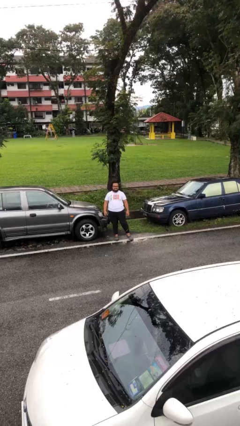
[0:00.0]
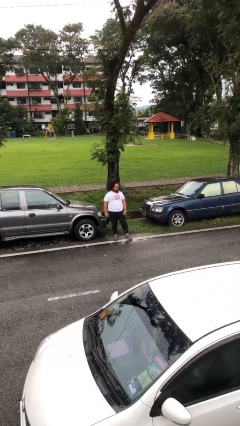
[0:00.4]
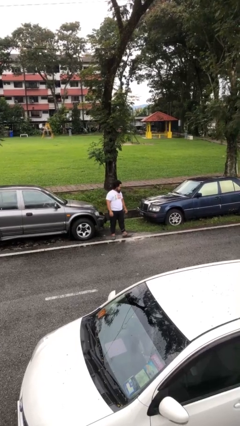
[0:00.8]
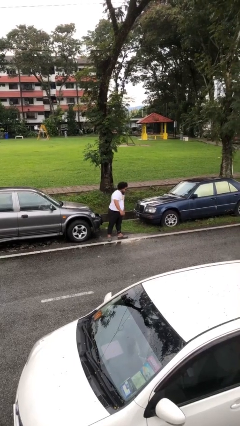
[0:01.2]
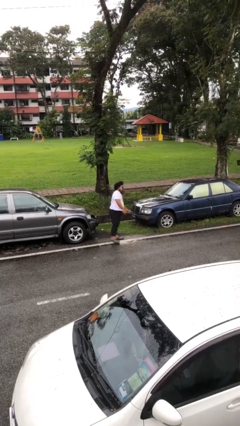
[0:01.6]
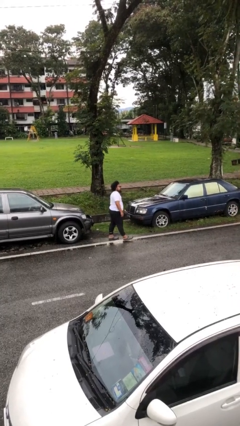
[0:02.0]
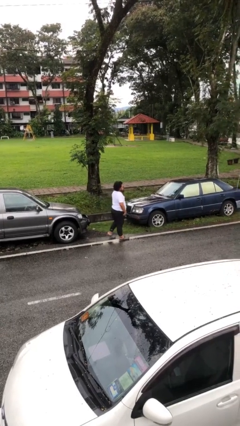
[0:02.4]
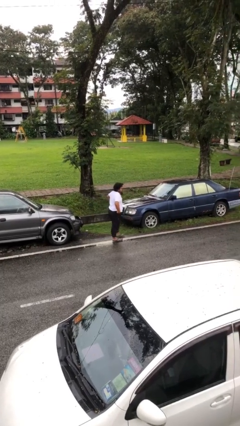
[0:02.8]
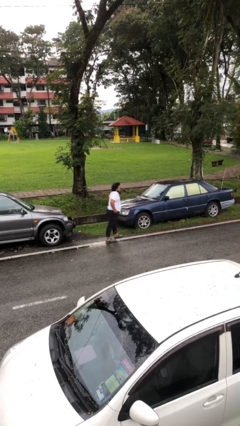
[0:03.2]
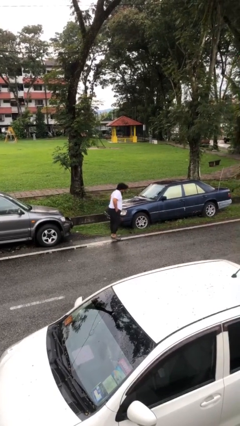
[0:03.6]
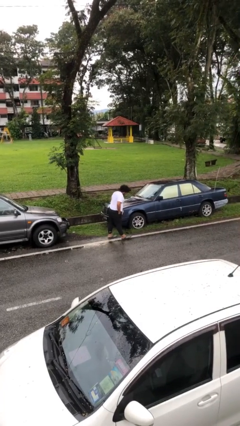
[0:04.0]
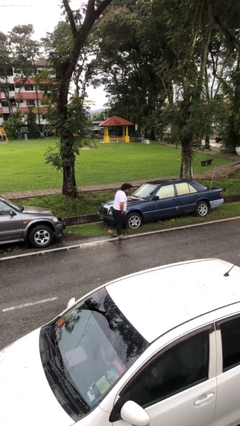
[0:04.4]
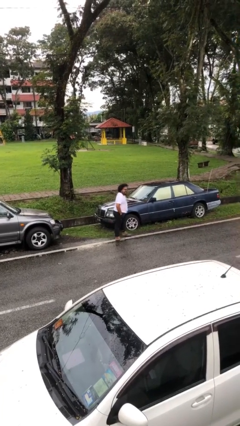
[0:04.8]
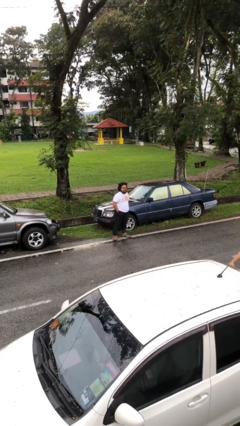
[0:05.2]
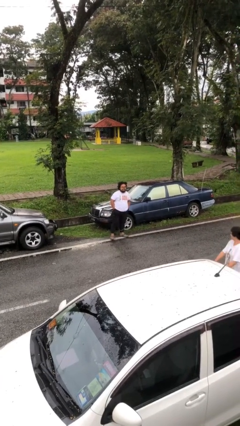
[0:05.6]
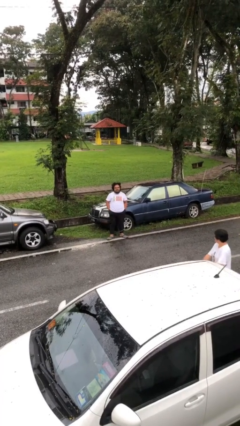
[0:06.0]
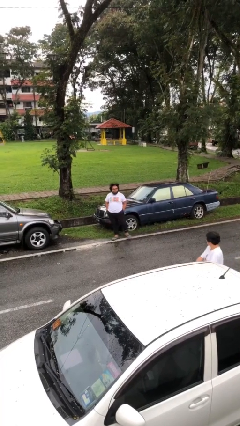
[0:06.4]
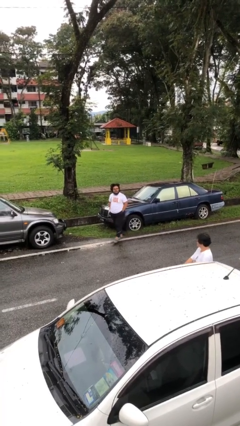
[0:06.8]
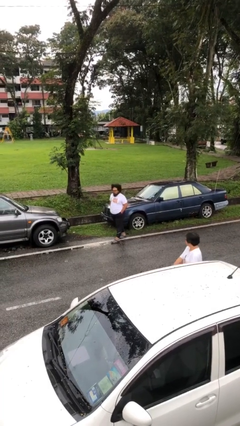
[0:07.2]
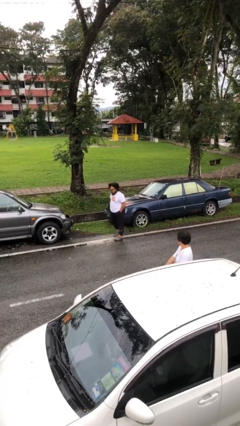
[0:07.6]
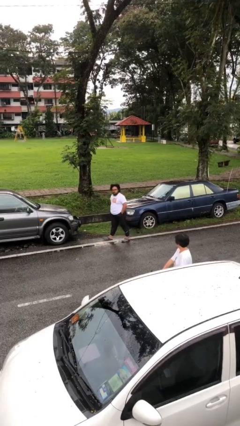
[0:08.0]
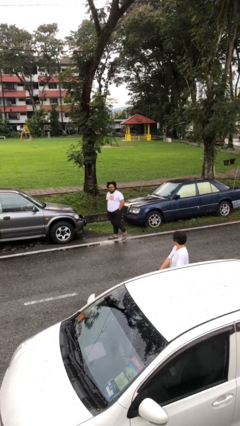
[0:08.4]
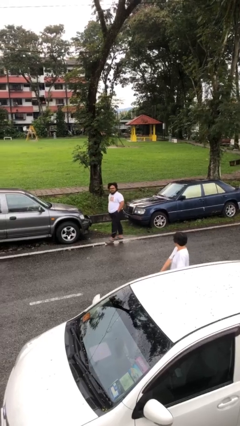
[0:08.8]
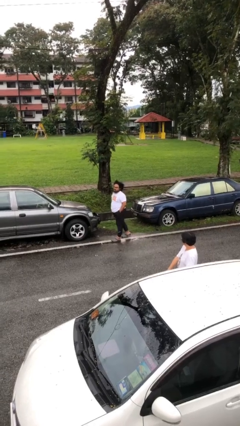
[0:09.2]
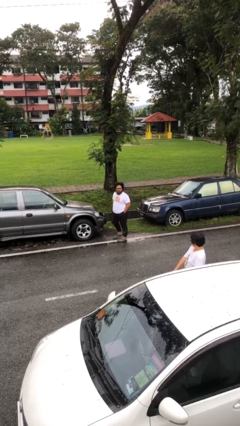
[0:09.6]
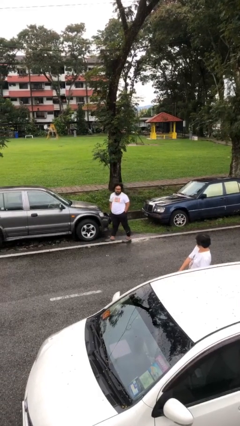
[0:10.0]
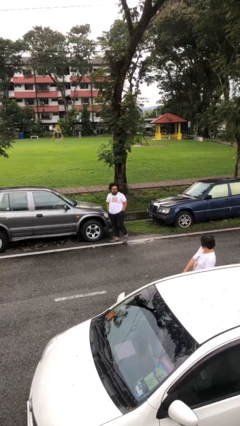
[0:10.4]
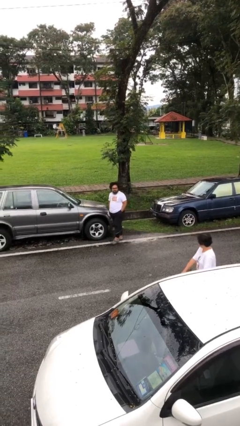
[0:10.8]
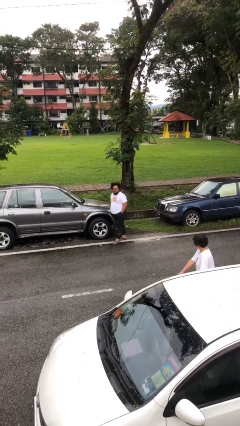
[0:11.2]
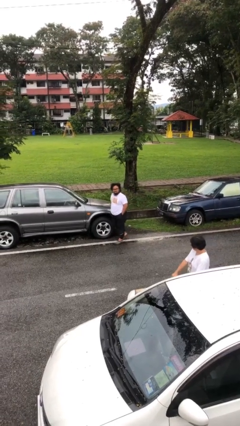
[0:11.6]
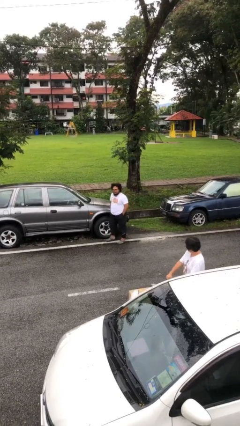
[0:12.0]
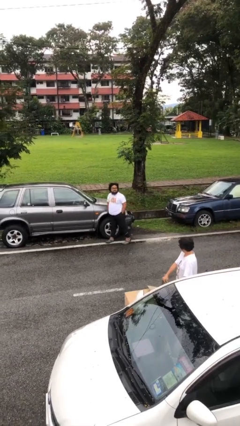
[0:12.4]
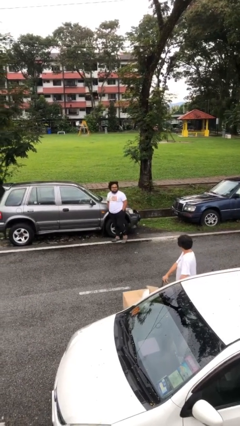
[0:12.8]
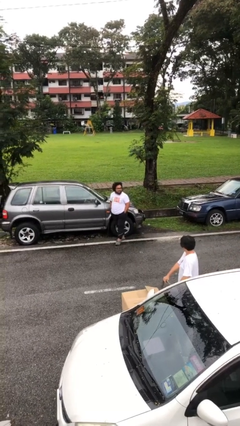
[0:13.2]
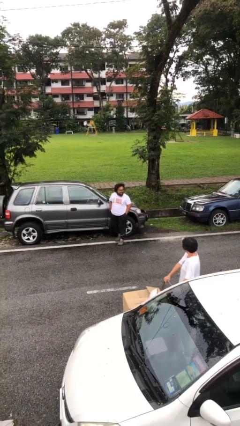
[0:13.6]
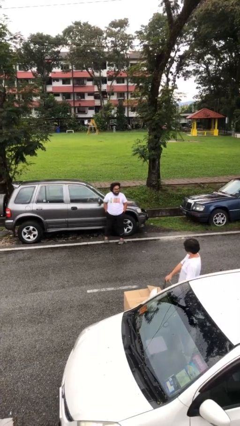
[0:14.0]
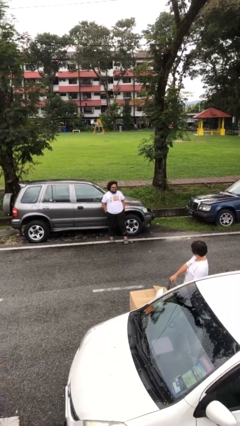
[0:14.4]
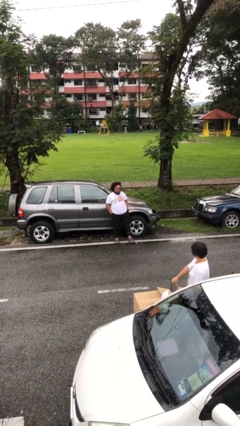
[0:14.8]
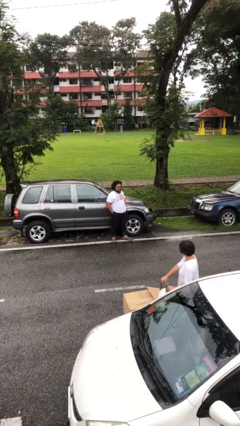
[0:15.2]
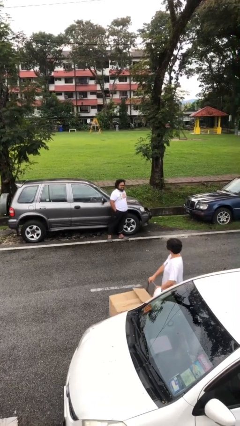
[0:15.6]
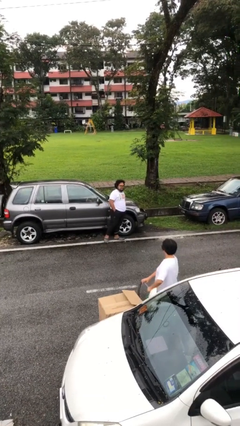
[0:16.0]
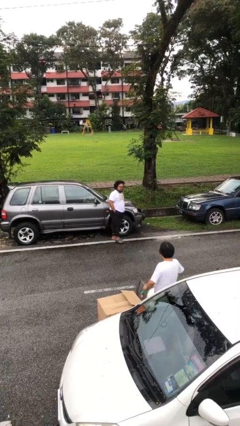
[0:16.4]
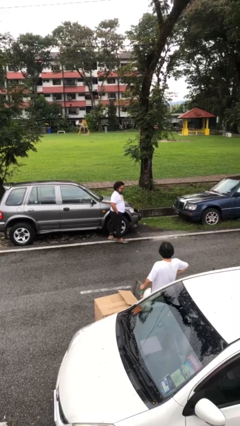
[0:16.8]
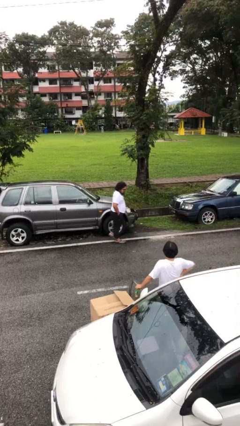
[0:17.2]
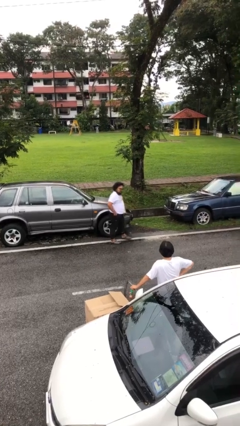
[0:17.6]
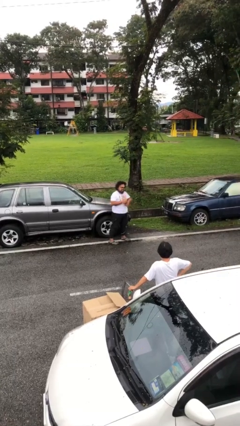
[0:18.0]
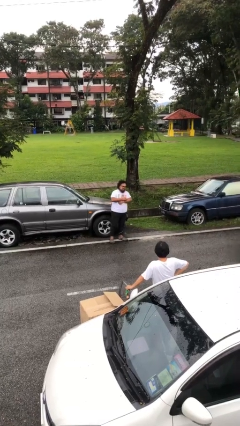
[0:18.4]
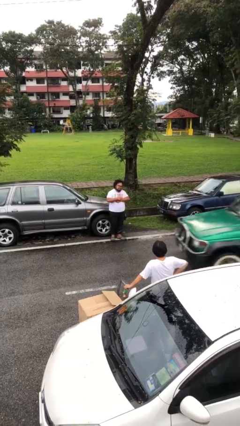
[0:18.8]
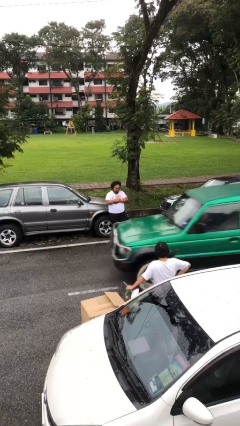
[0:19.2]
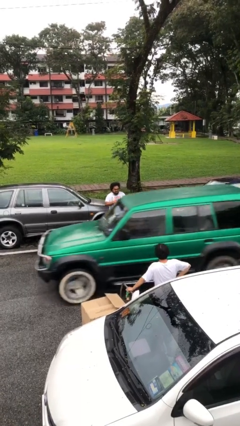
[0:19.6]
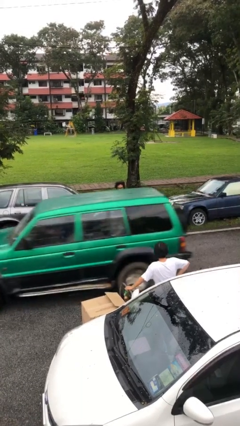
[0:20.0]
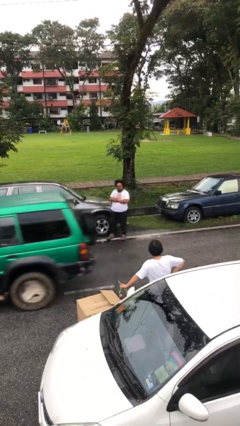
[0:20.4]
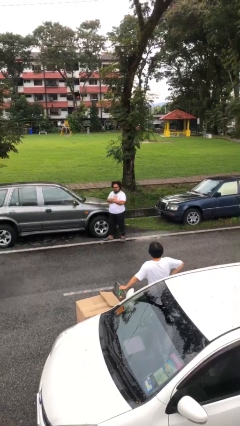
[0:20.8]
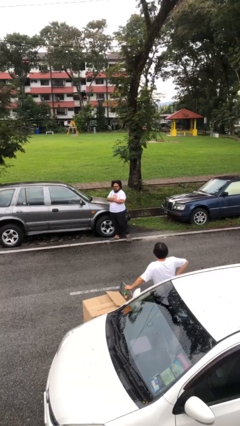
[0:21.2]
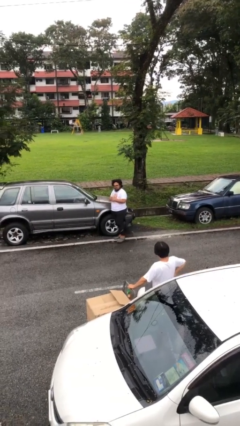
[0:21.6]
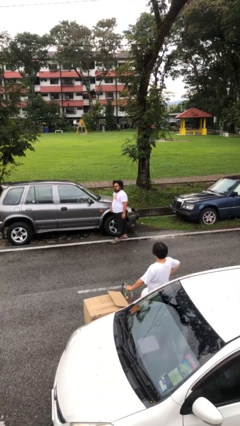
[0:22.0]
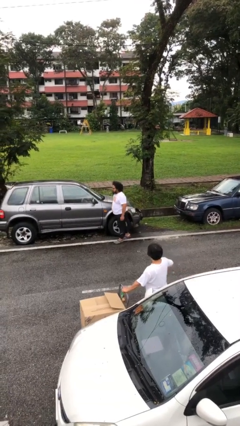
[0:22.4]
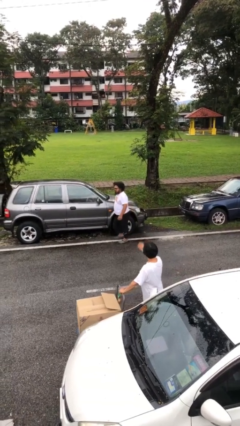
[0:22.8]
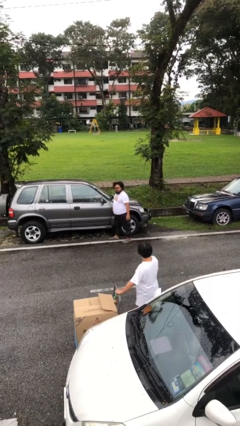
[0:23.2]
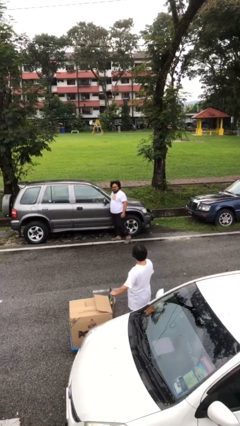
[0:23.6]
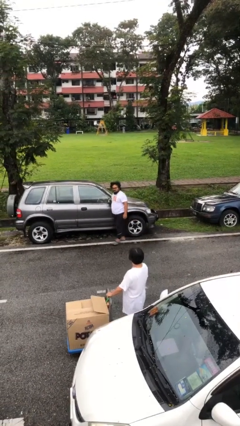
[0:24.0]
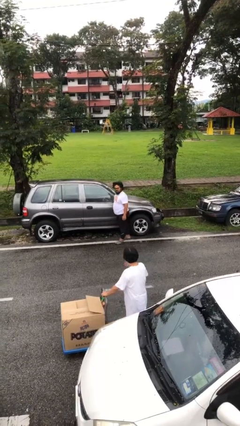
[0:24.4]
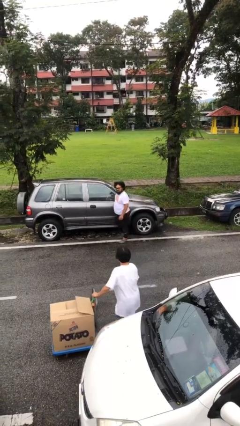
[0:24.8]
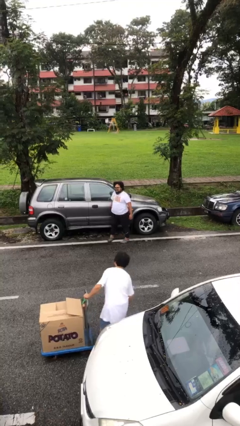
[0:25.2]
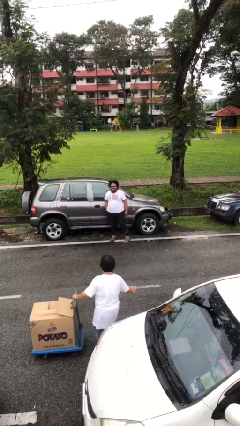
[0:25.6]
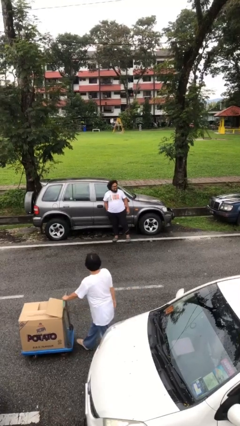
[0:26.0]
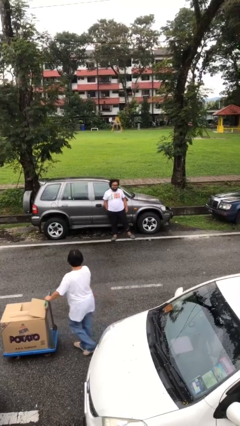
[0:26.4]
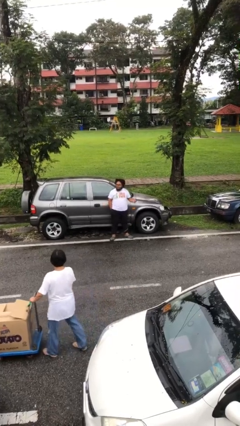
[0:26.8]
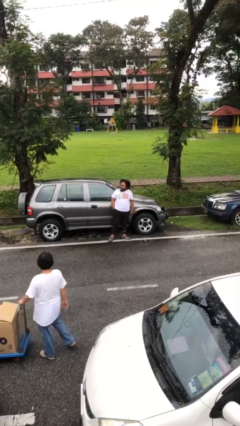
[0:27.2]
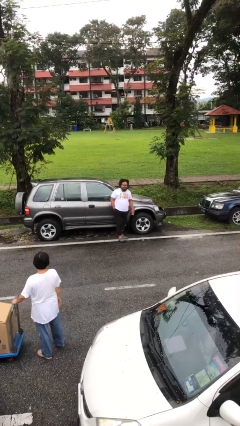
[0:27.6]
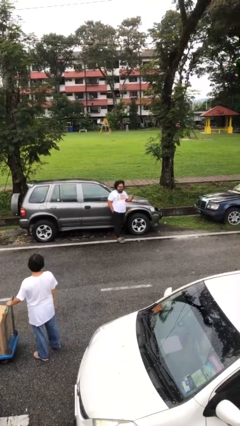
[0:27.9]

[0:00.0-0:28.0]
person walks

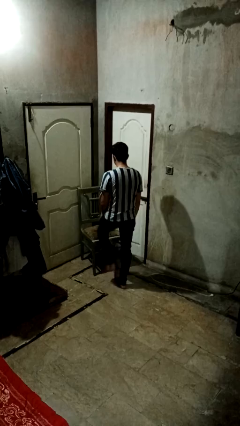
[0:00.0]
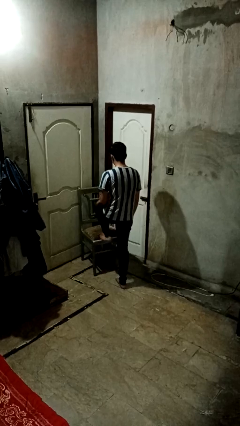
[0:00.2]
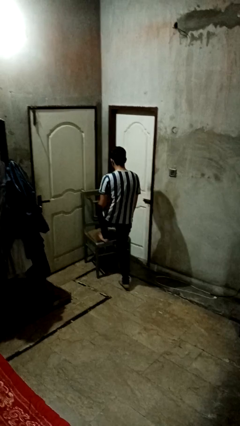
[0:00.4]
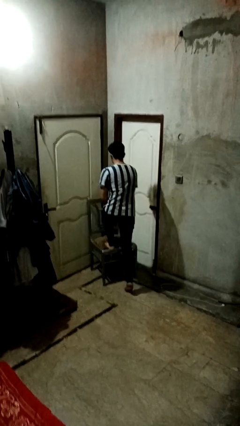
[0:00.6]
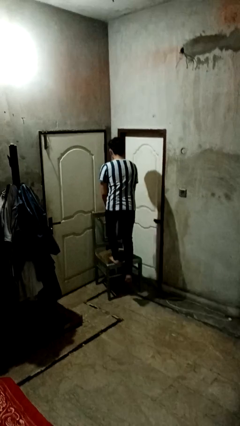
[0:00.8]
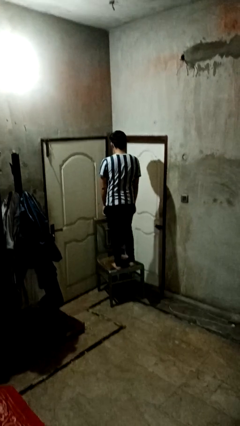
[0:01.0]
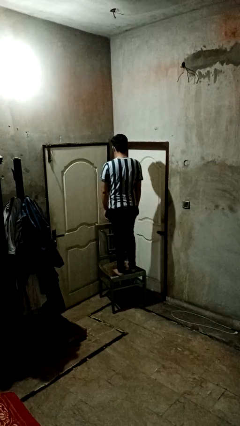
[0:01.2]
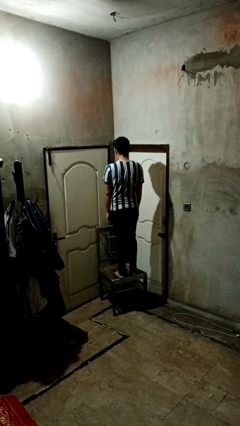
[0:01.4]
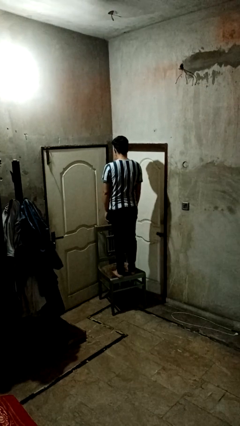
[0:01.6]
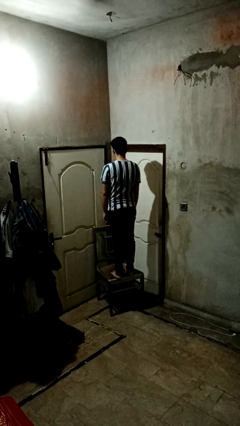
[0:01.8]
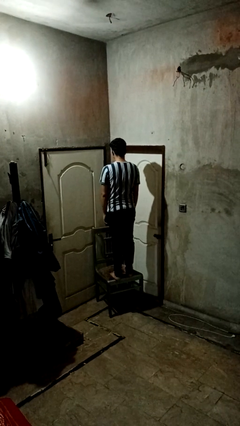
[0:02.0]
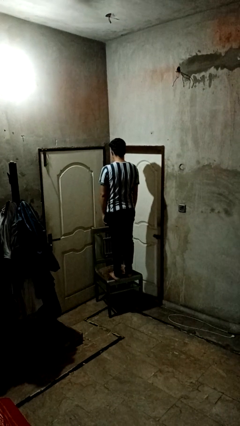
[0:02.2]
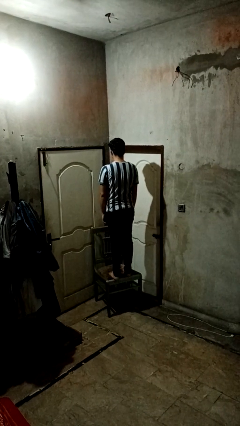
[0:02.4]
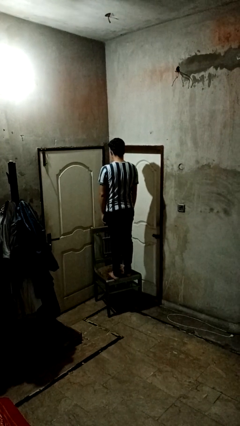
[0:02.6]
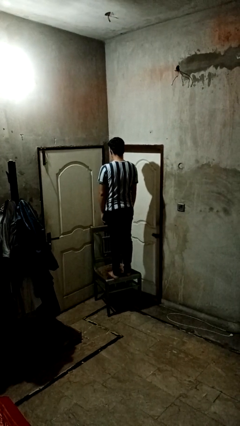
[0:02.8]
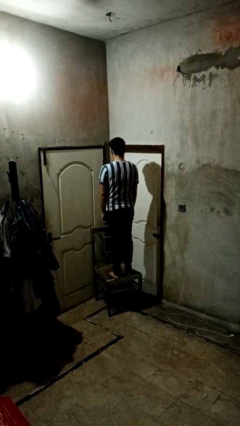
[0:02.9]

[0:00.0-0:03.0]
person climbs on chair

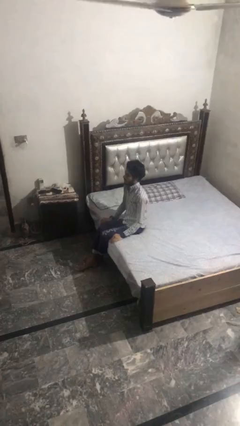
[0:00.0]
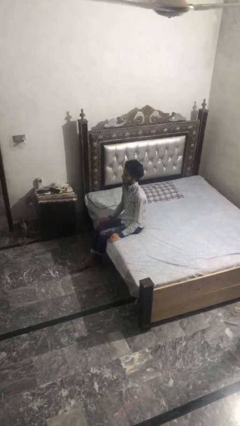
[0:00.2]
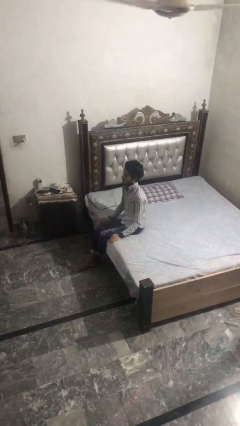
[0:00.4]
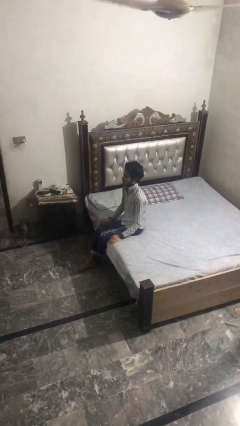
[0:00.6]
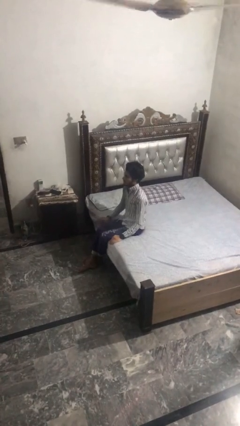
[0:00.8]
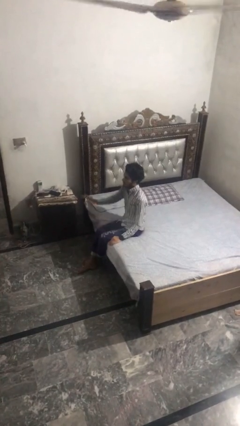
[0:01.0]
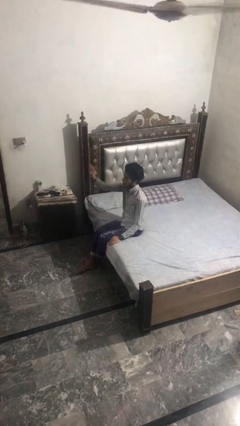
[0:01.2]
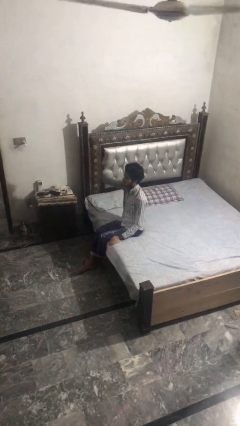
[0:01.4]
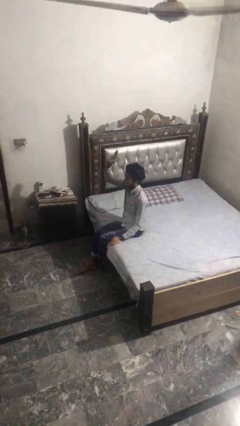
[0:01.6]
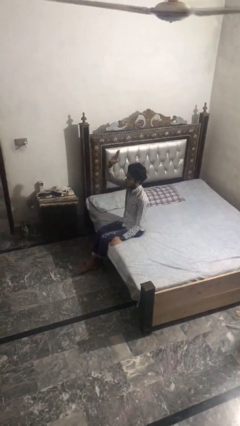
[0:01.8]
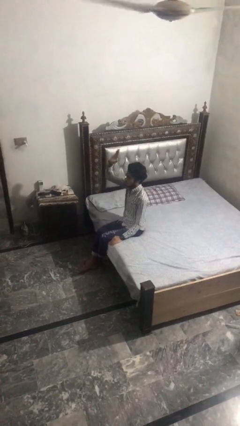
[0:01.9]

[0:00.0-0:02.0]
person gestures raise hand
